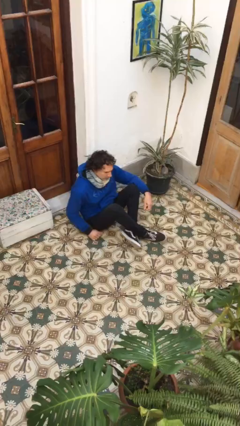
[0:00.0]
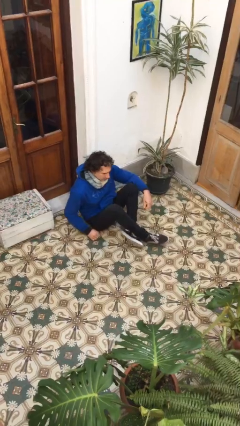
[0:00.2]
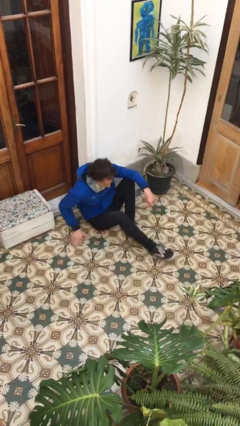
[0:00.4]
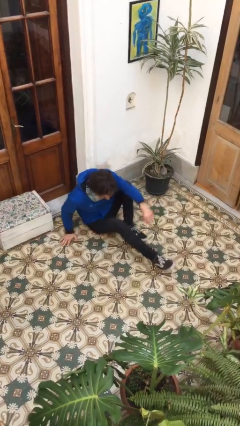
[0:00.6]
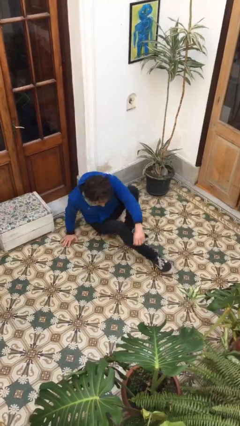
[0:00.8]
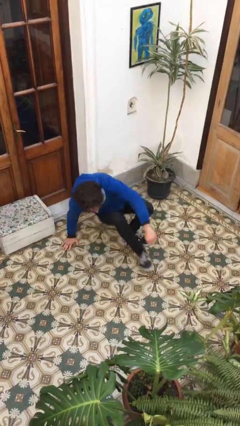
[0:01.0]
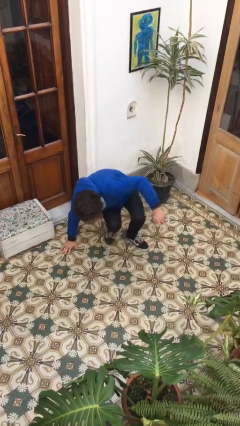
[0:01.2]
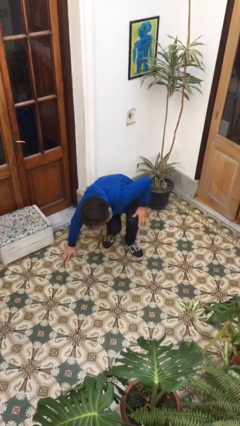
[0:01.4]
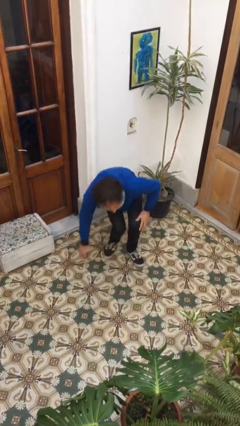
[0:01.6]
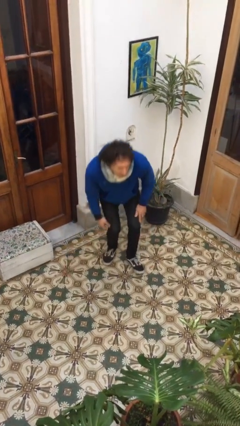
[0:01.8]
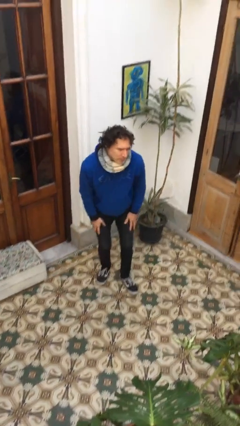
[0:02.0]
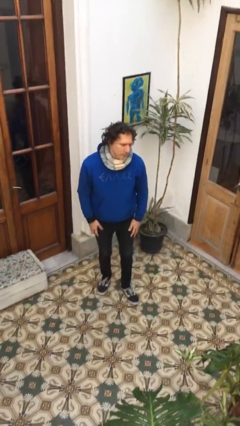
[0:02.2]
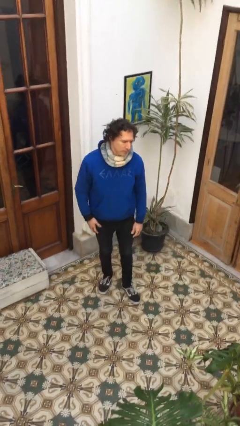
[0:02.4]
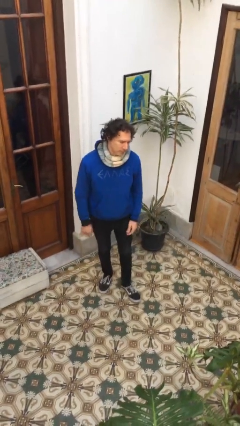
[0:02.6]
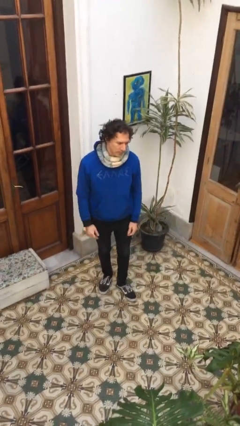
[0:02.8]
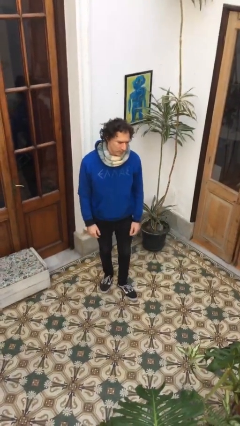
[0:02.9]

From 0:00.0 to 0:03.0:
person stands up from floor

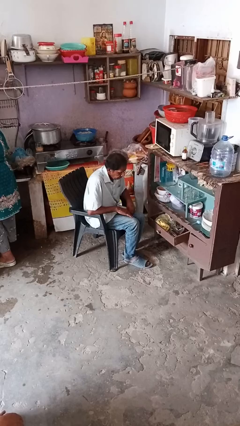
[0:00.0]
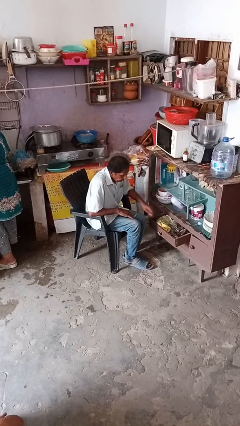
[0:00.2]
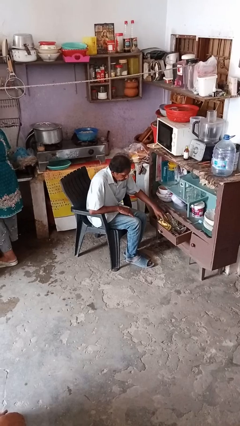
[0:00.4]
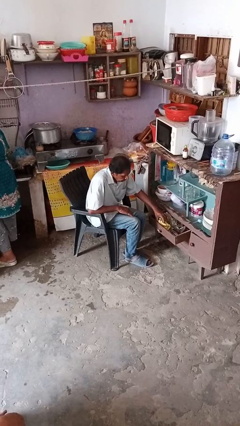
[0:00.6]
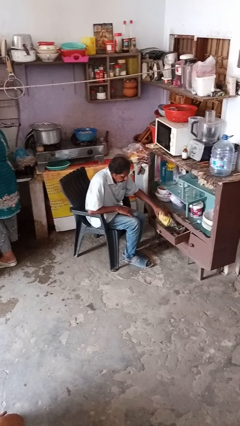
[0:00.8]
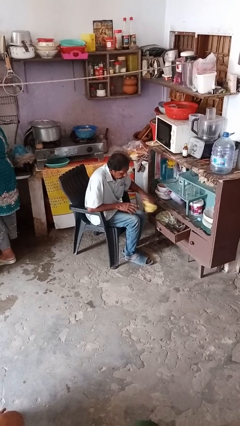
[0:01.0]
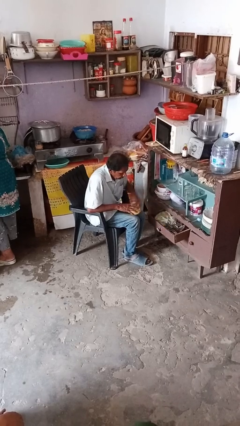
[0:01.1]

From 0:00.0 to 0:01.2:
person takes clothes from dresser

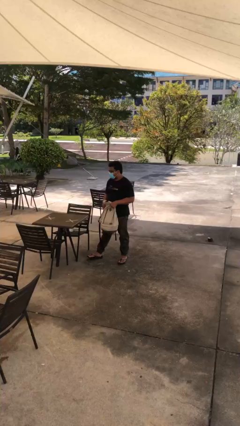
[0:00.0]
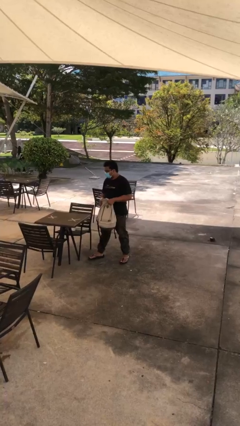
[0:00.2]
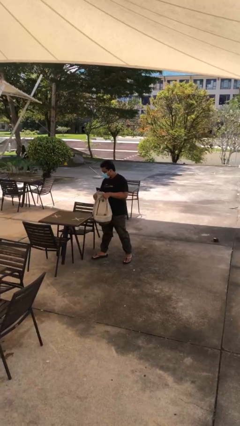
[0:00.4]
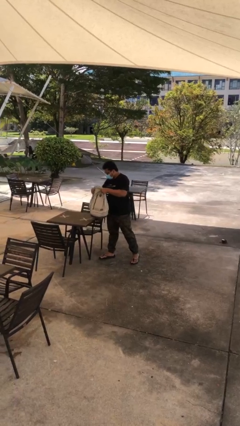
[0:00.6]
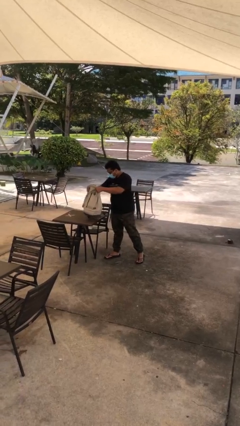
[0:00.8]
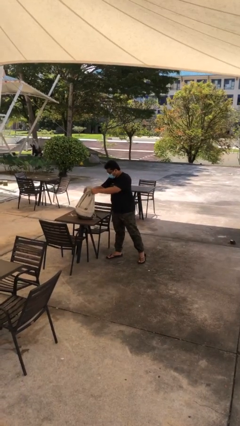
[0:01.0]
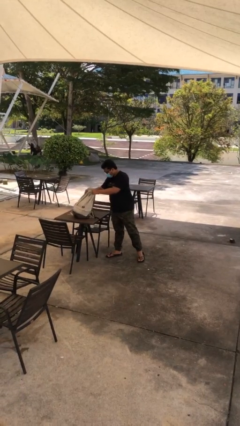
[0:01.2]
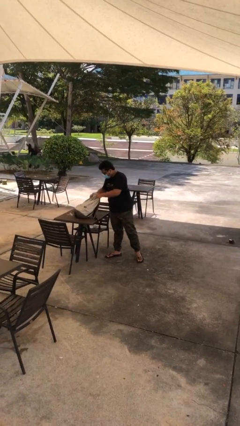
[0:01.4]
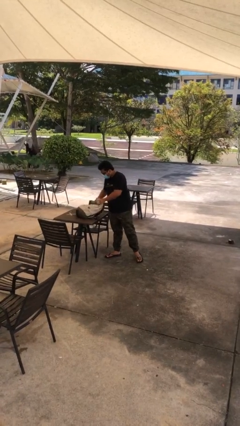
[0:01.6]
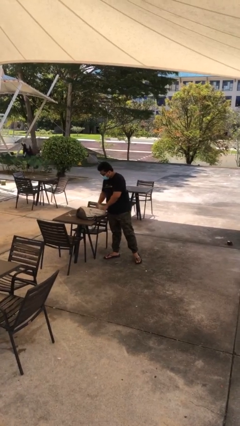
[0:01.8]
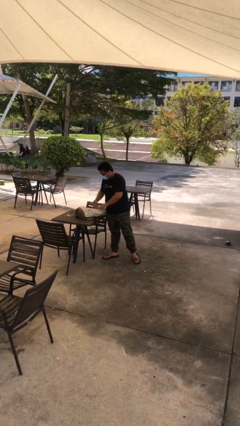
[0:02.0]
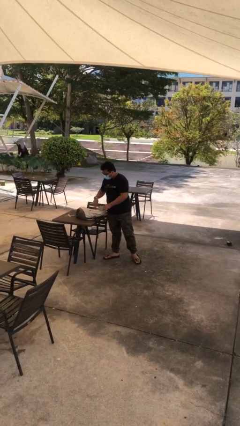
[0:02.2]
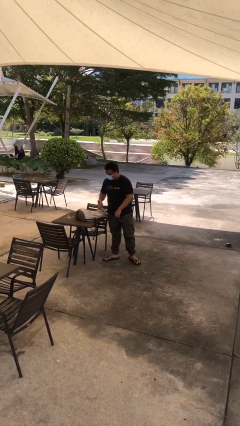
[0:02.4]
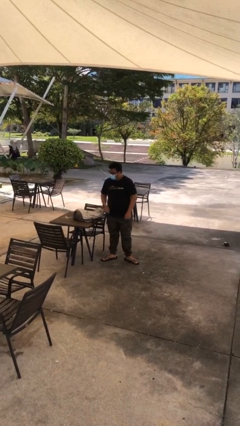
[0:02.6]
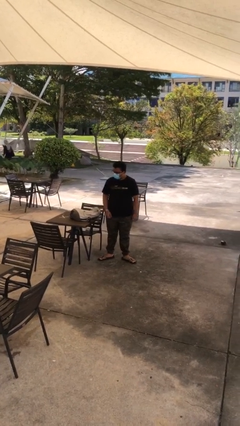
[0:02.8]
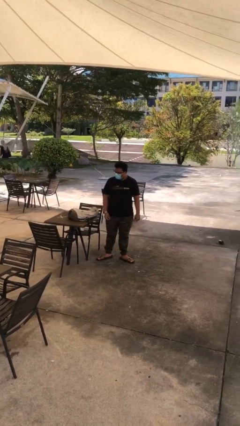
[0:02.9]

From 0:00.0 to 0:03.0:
person puts down object on table

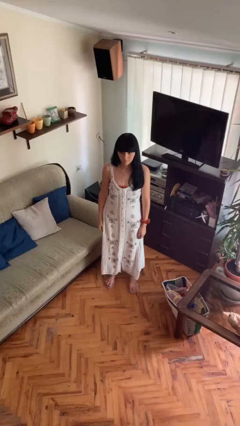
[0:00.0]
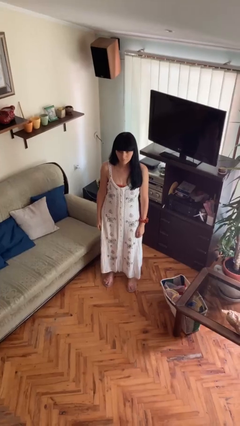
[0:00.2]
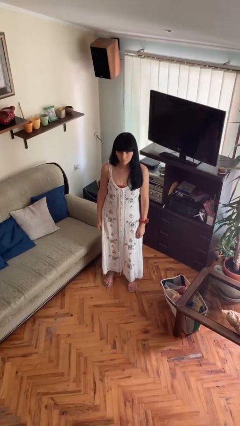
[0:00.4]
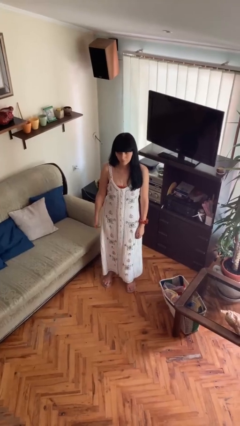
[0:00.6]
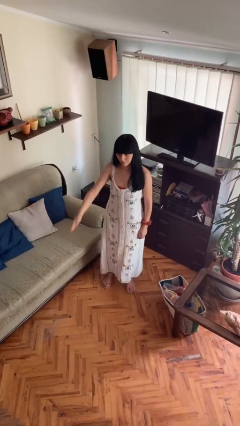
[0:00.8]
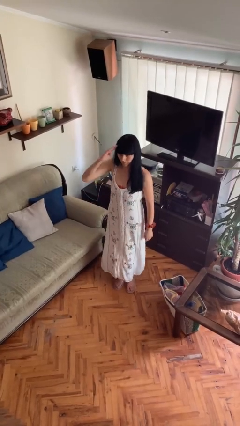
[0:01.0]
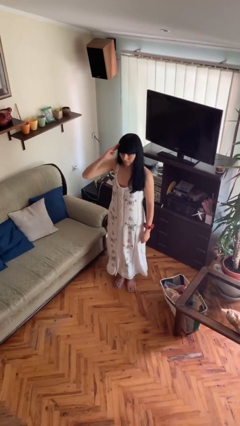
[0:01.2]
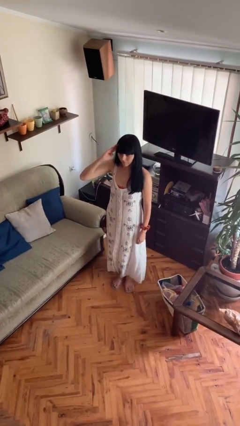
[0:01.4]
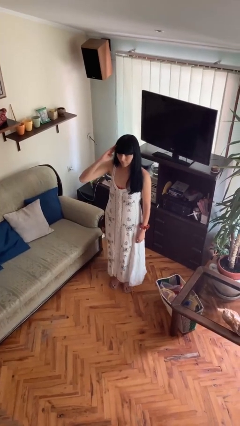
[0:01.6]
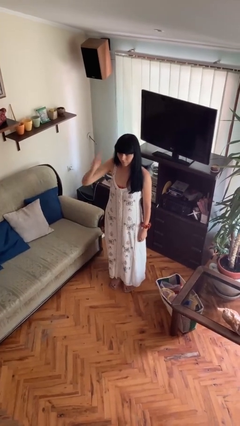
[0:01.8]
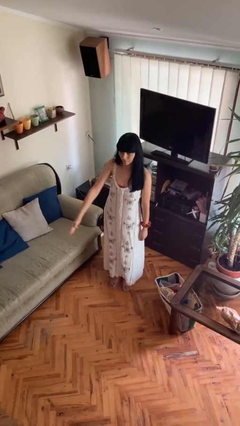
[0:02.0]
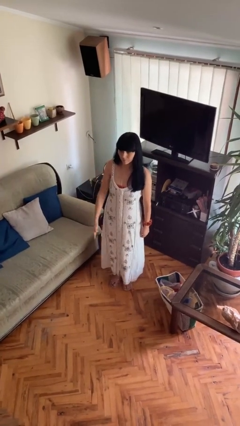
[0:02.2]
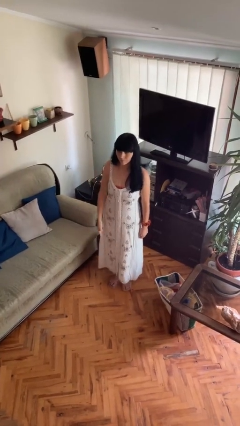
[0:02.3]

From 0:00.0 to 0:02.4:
person salutes

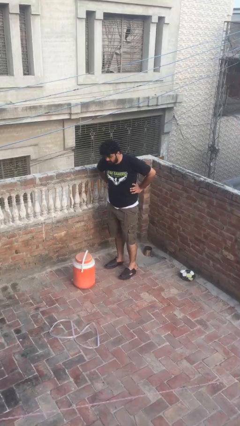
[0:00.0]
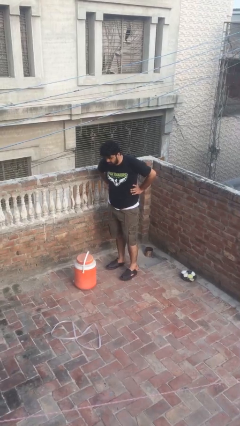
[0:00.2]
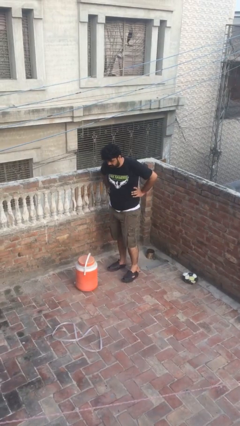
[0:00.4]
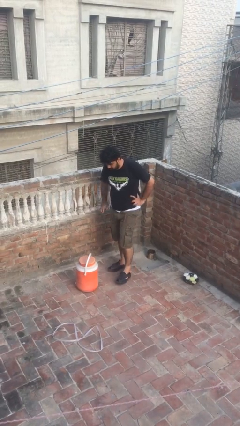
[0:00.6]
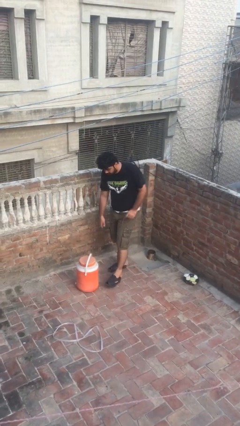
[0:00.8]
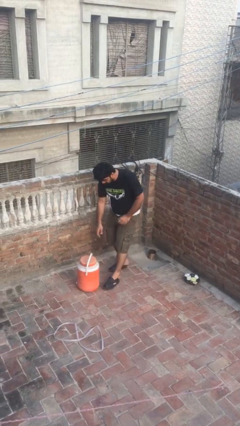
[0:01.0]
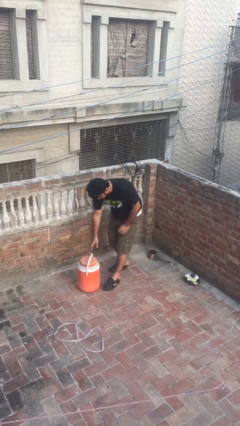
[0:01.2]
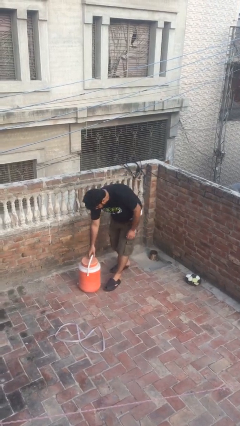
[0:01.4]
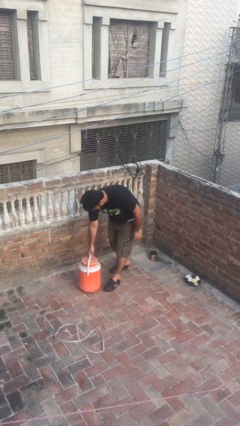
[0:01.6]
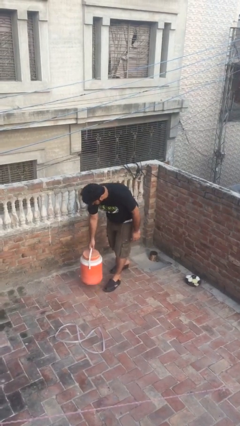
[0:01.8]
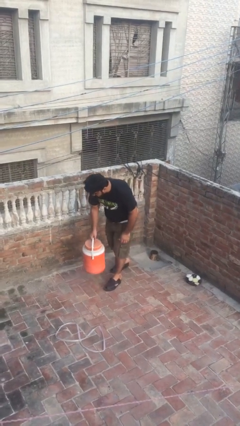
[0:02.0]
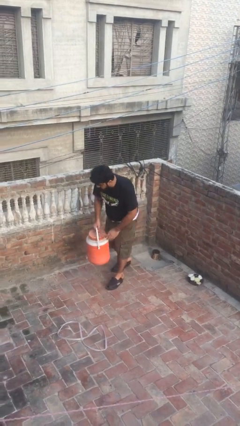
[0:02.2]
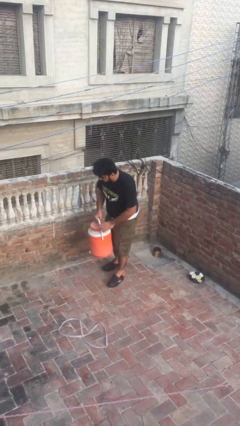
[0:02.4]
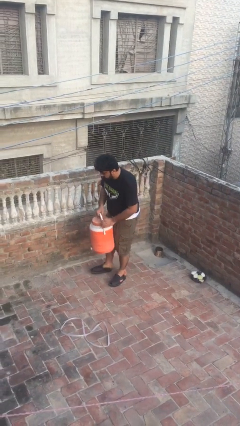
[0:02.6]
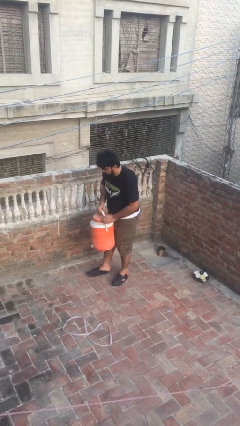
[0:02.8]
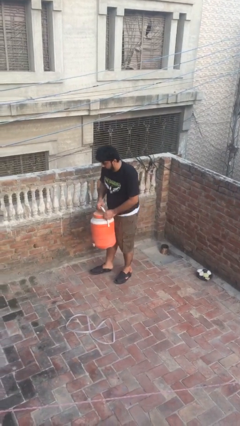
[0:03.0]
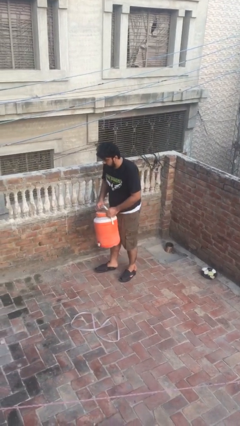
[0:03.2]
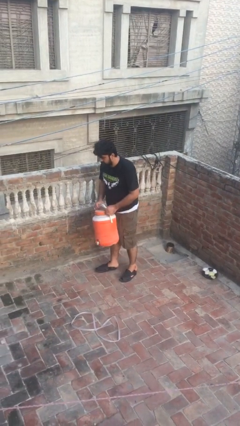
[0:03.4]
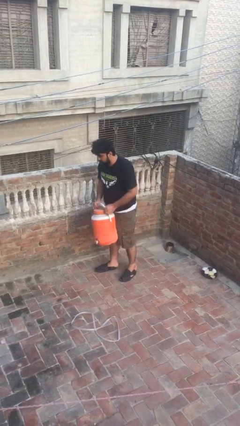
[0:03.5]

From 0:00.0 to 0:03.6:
person picks up object from floor

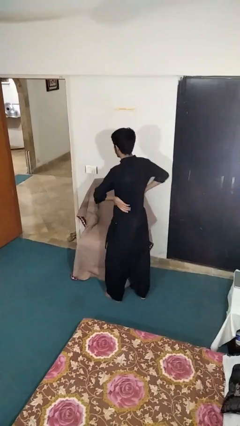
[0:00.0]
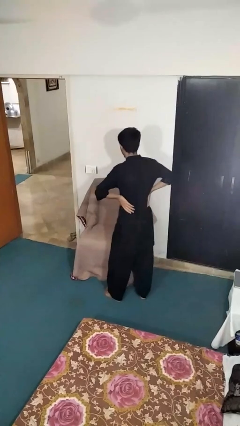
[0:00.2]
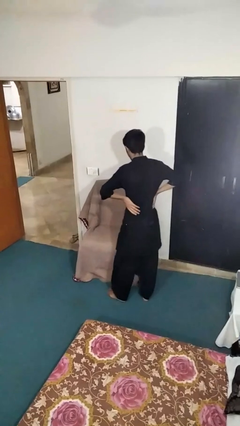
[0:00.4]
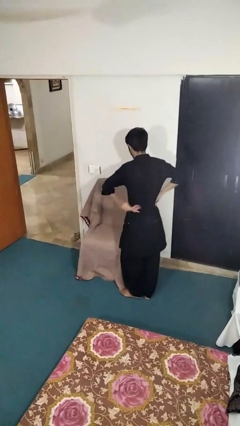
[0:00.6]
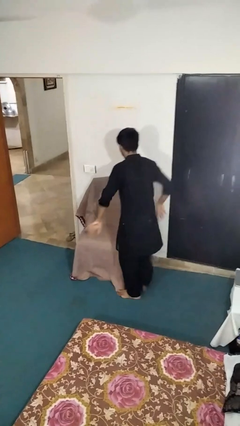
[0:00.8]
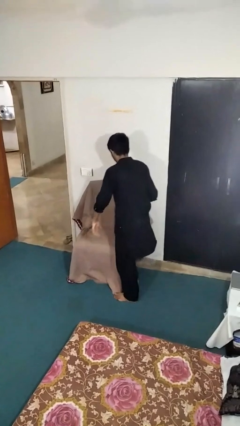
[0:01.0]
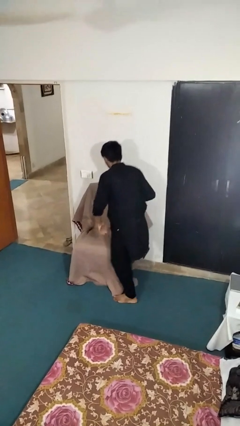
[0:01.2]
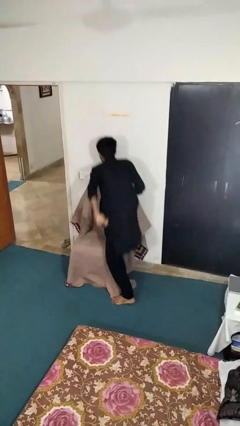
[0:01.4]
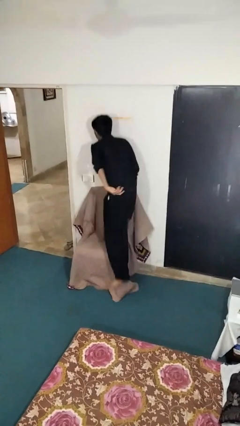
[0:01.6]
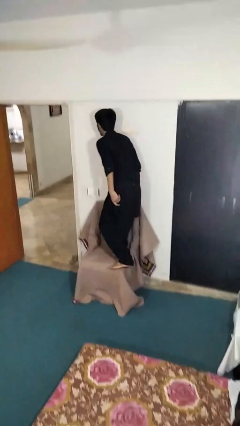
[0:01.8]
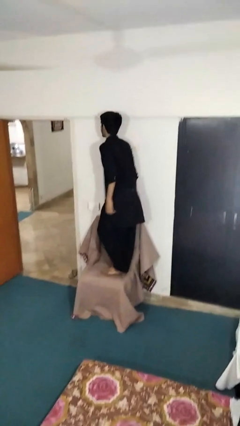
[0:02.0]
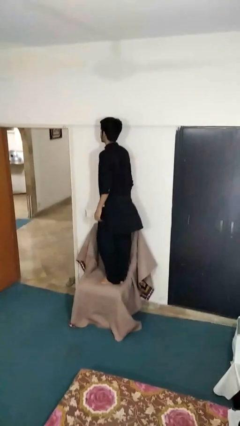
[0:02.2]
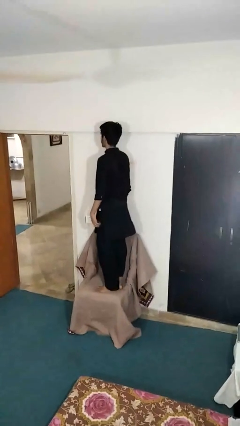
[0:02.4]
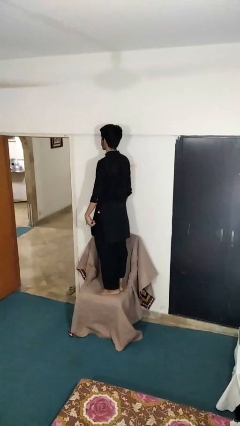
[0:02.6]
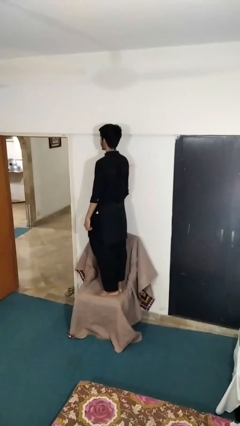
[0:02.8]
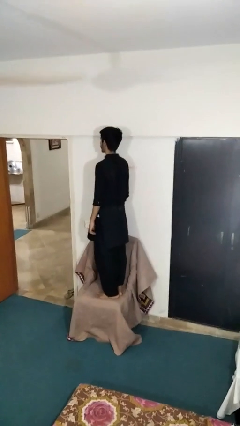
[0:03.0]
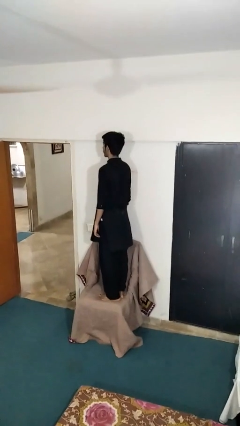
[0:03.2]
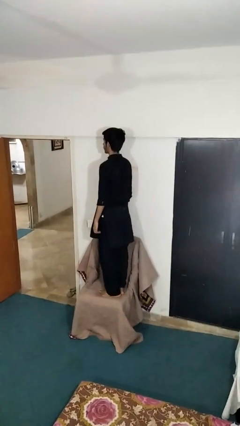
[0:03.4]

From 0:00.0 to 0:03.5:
person climbs on couch

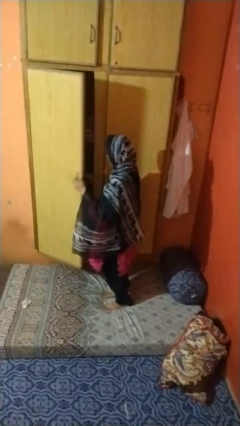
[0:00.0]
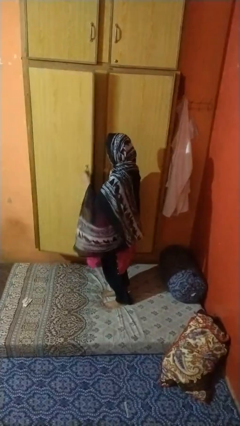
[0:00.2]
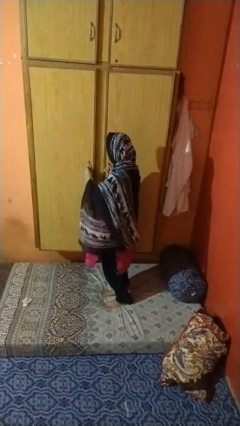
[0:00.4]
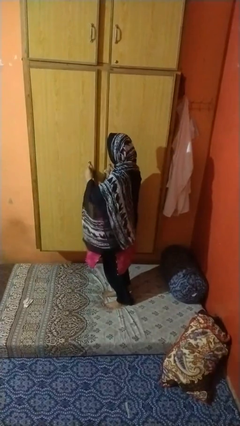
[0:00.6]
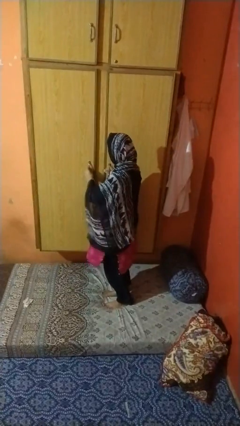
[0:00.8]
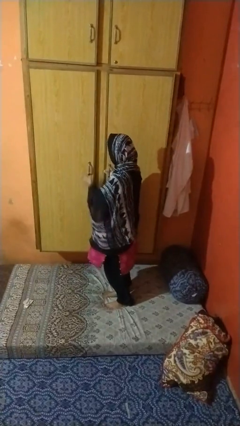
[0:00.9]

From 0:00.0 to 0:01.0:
person closes closet door
